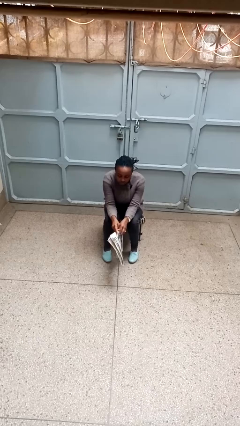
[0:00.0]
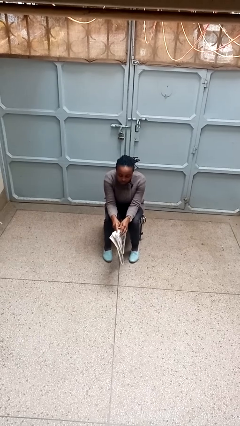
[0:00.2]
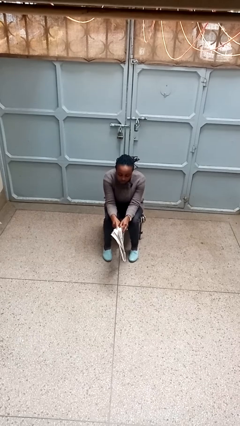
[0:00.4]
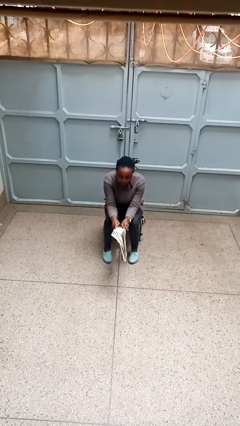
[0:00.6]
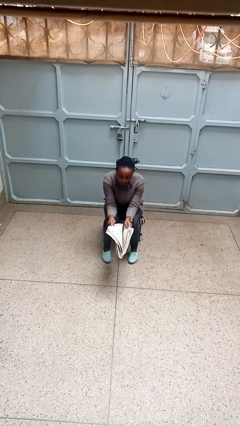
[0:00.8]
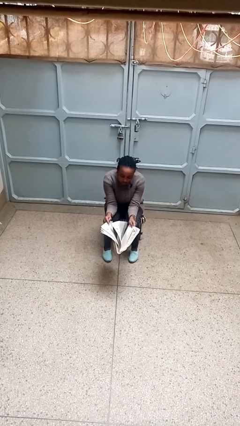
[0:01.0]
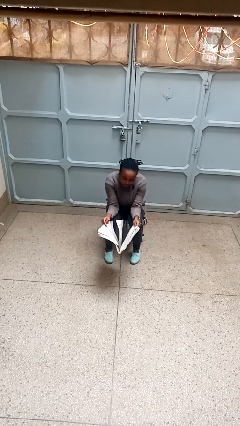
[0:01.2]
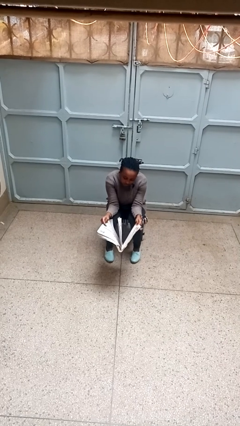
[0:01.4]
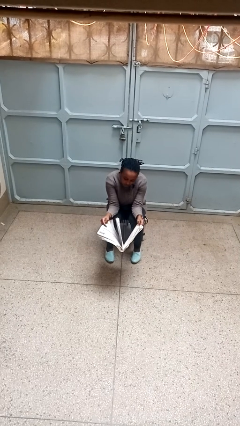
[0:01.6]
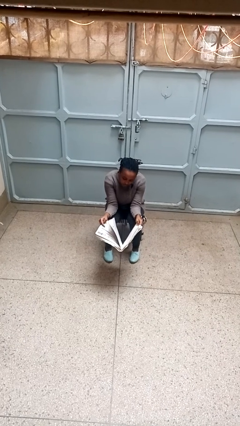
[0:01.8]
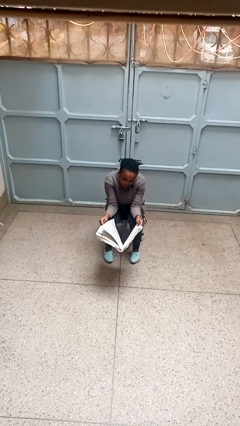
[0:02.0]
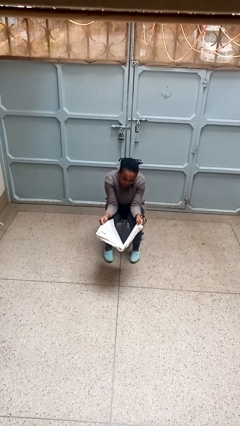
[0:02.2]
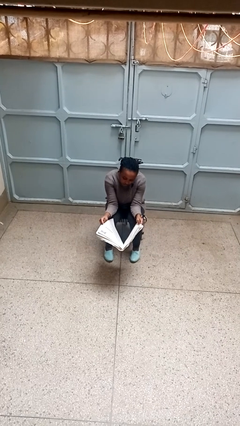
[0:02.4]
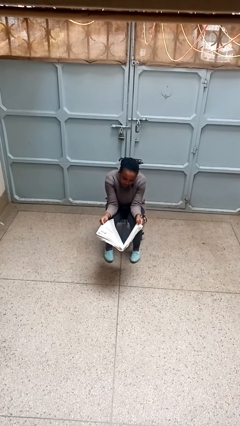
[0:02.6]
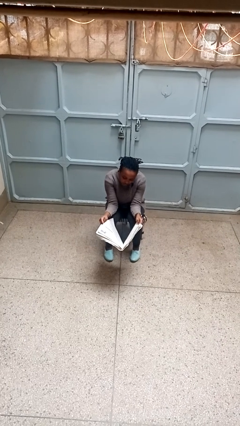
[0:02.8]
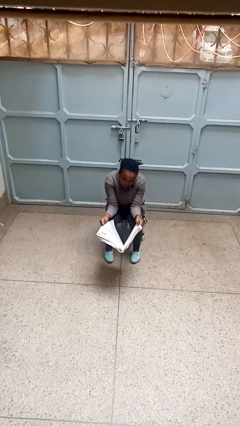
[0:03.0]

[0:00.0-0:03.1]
person reads newspaper

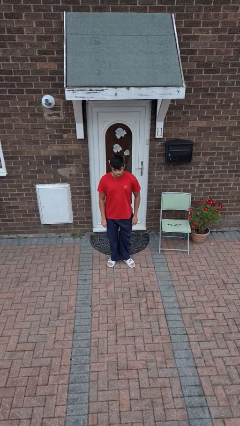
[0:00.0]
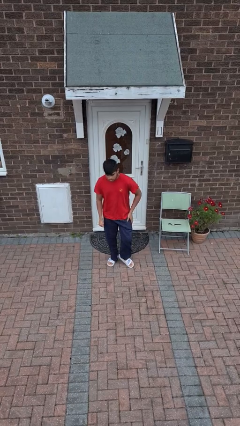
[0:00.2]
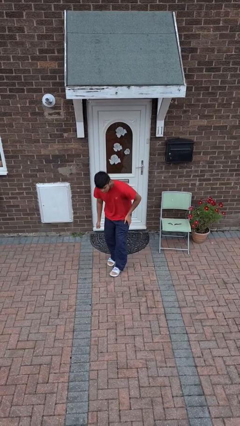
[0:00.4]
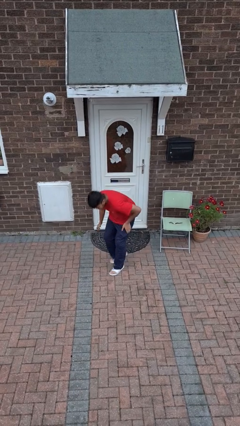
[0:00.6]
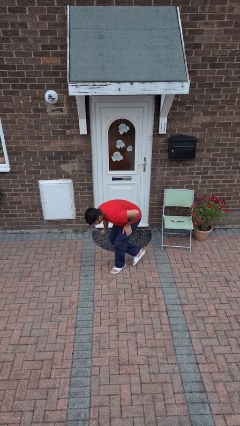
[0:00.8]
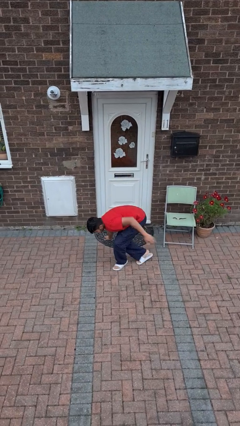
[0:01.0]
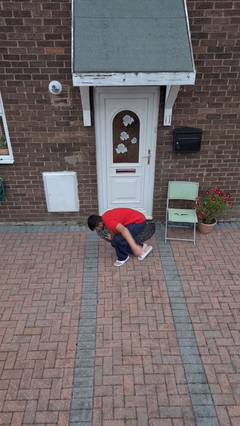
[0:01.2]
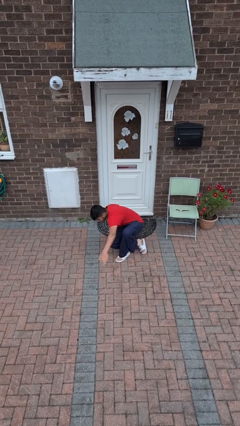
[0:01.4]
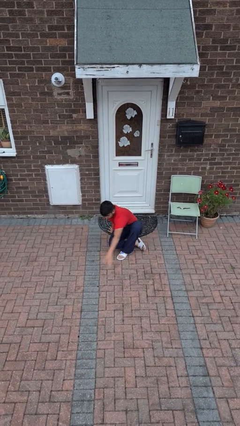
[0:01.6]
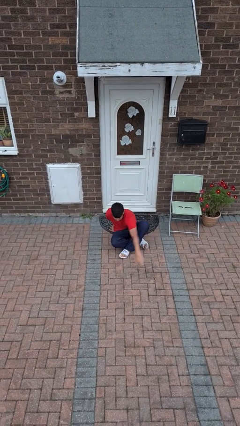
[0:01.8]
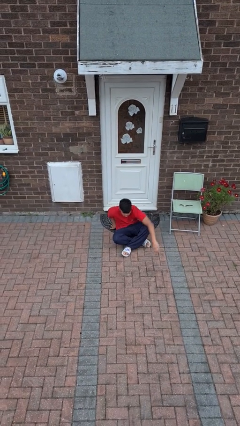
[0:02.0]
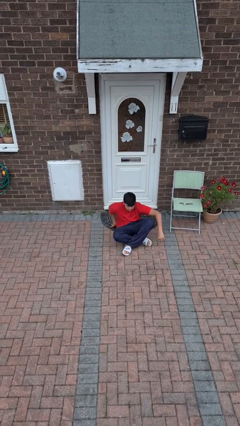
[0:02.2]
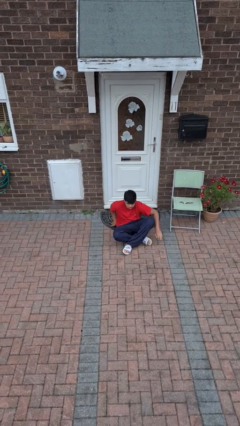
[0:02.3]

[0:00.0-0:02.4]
person sits crisscross

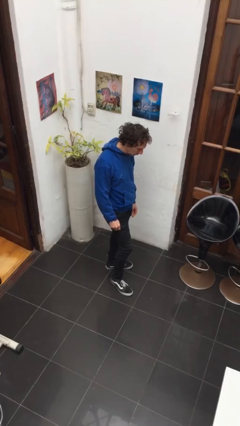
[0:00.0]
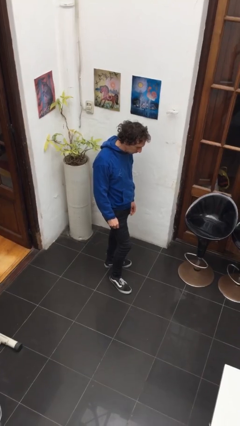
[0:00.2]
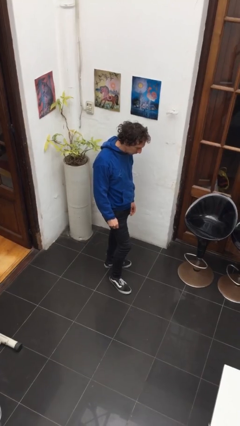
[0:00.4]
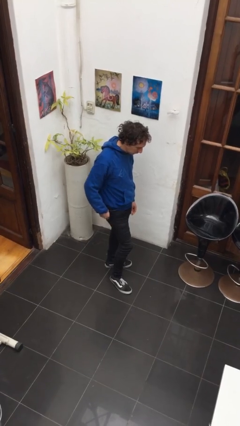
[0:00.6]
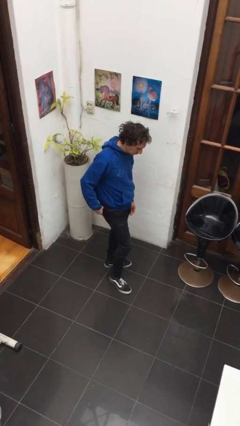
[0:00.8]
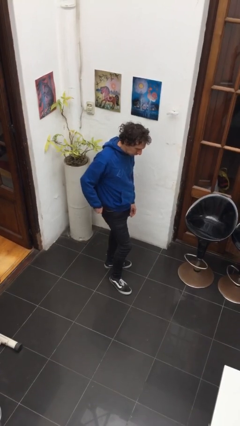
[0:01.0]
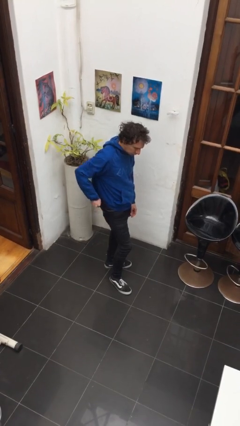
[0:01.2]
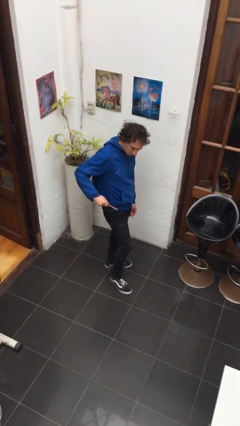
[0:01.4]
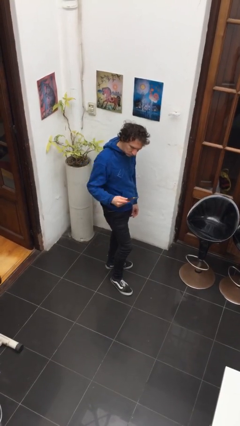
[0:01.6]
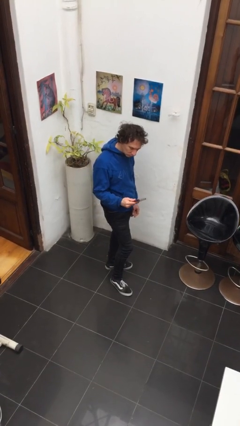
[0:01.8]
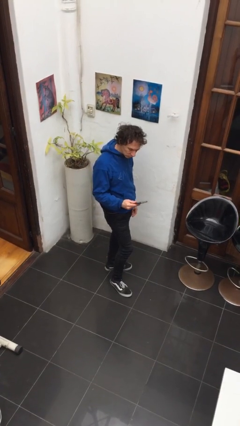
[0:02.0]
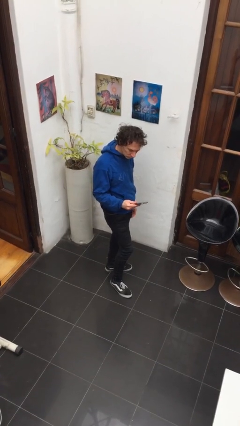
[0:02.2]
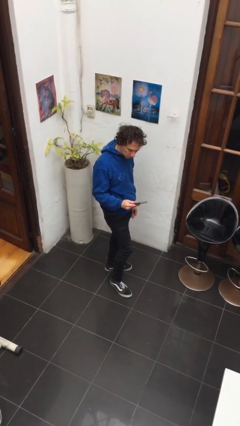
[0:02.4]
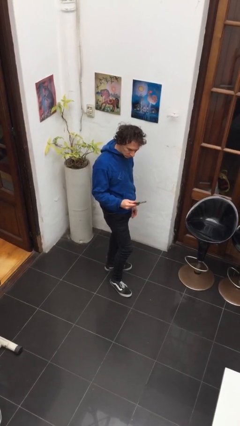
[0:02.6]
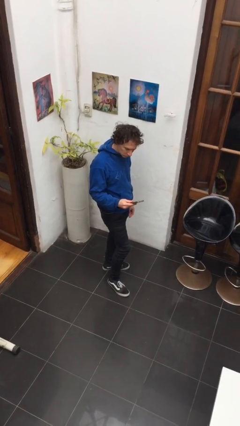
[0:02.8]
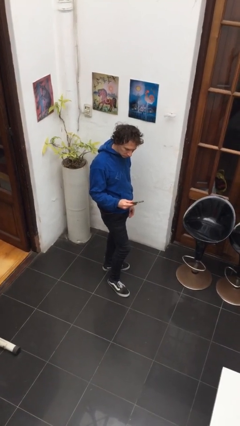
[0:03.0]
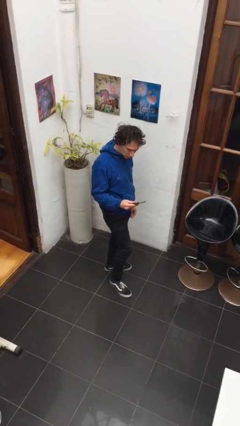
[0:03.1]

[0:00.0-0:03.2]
person takes phone from pocket

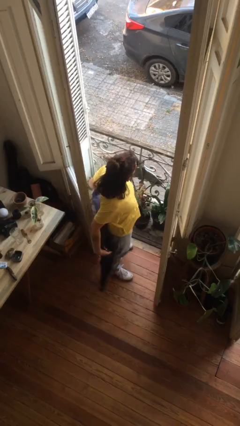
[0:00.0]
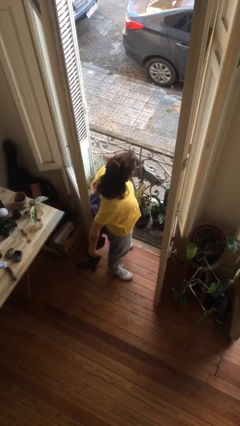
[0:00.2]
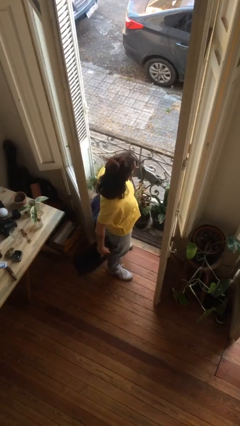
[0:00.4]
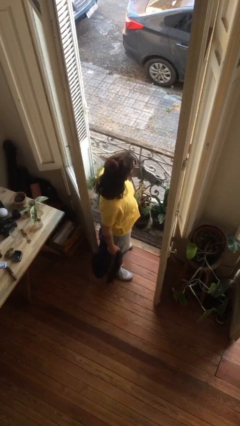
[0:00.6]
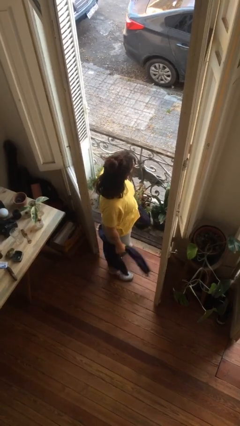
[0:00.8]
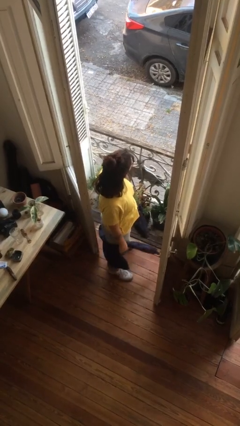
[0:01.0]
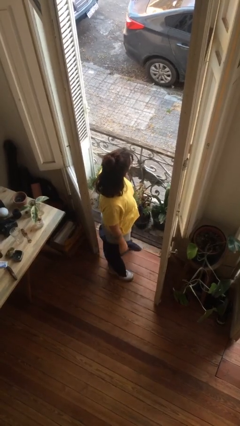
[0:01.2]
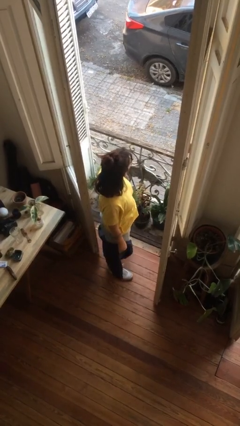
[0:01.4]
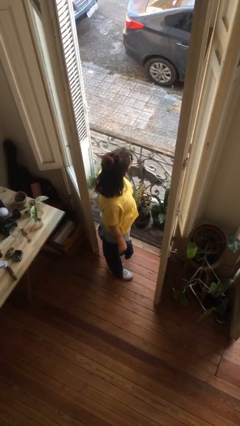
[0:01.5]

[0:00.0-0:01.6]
person unties jacket around waist

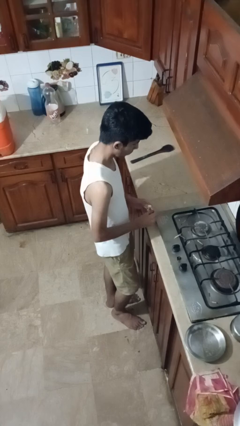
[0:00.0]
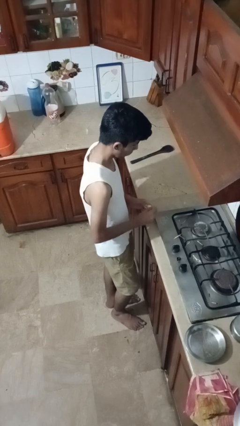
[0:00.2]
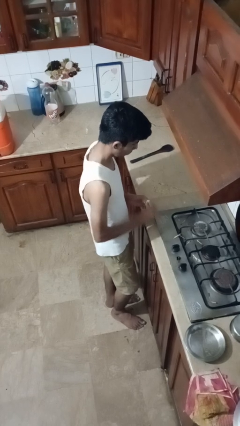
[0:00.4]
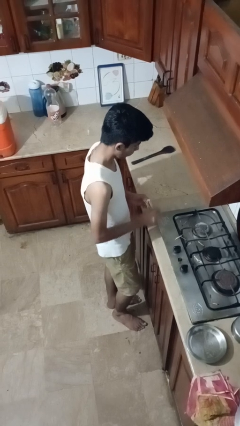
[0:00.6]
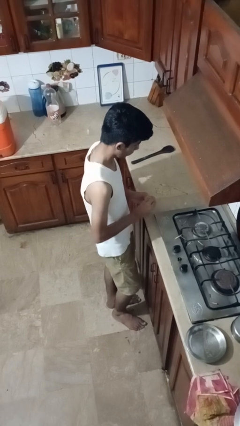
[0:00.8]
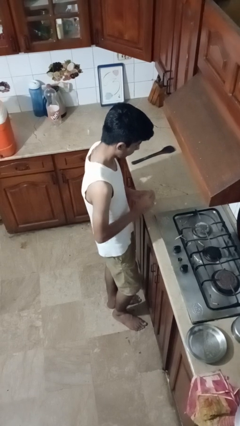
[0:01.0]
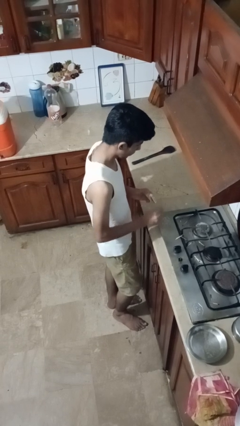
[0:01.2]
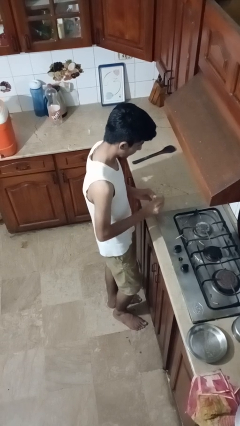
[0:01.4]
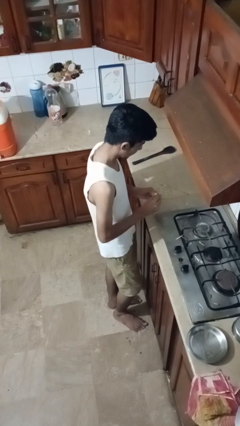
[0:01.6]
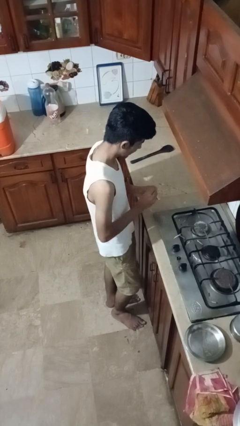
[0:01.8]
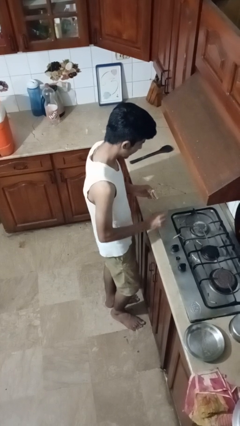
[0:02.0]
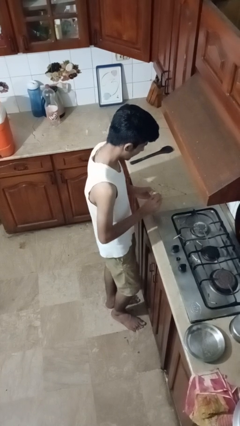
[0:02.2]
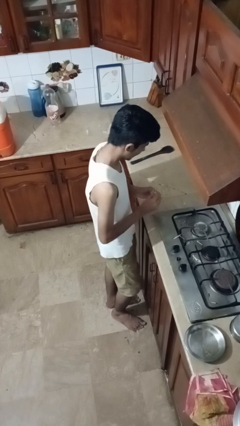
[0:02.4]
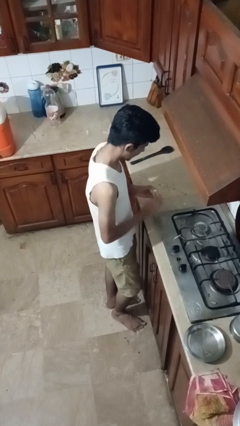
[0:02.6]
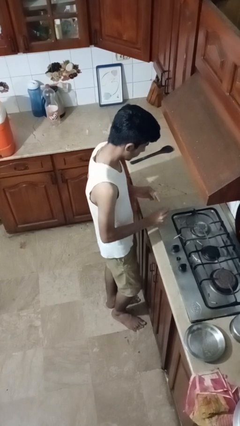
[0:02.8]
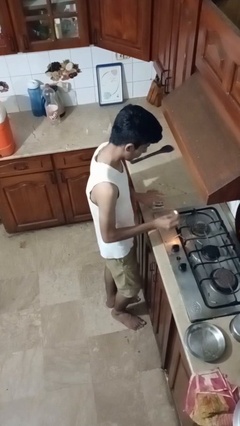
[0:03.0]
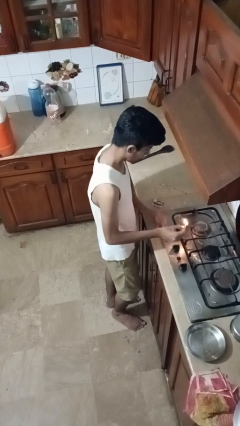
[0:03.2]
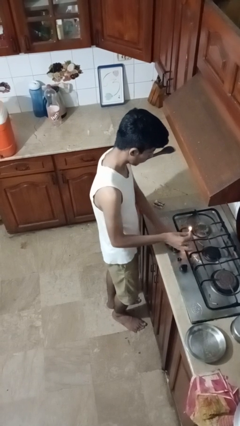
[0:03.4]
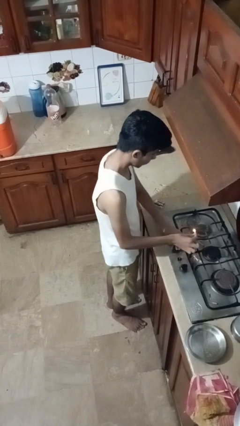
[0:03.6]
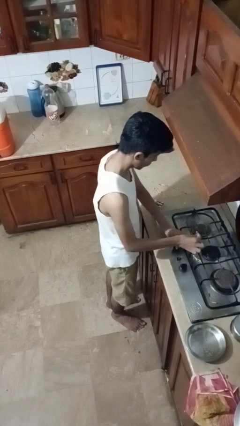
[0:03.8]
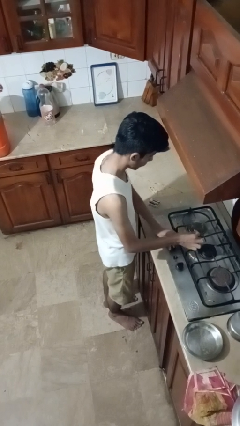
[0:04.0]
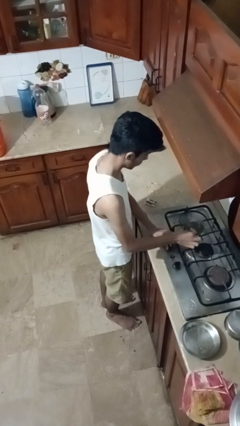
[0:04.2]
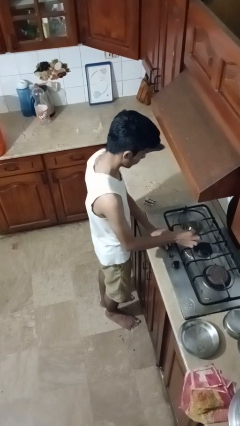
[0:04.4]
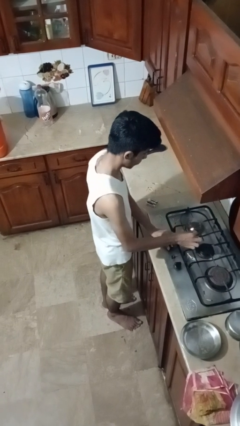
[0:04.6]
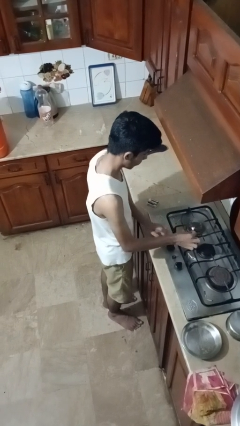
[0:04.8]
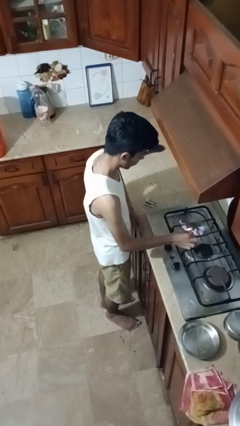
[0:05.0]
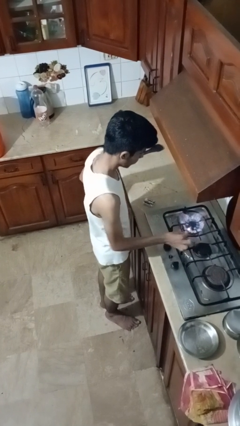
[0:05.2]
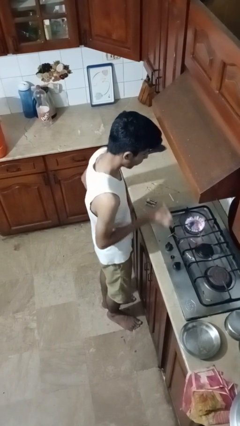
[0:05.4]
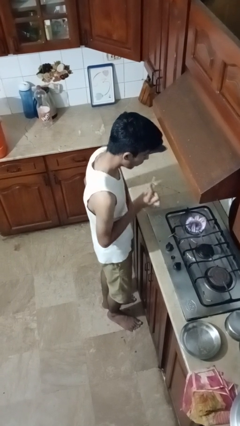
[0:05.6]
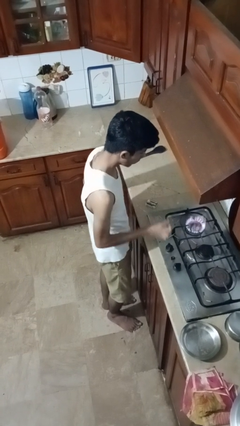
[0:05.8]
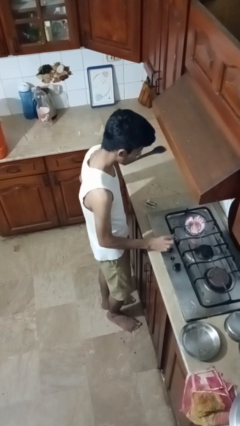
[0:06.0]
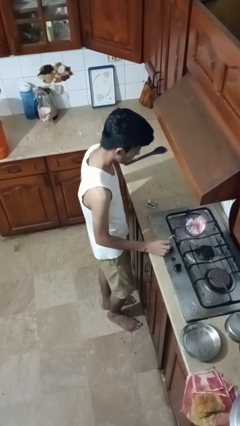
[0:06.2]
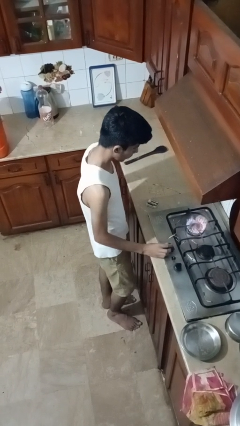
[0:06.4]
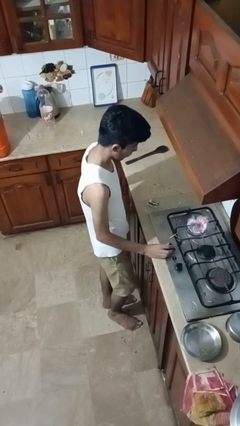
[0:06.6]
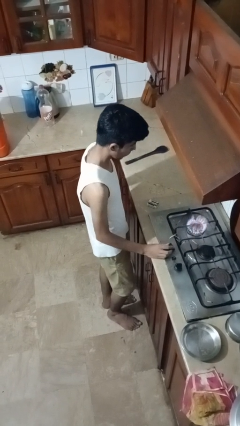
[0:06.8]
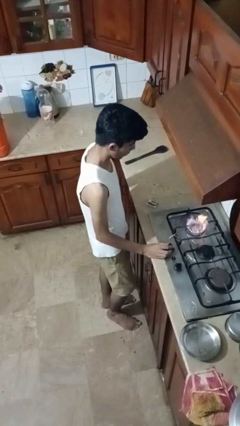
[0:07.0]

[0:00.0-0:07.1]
person turns on stovetop

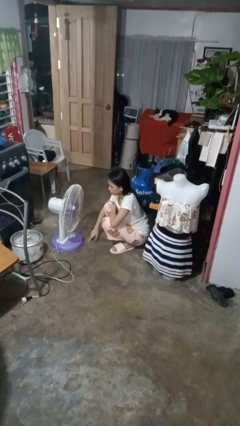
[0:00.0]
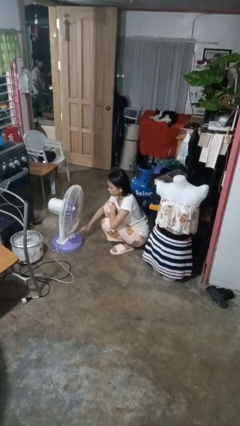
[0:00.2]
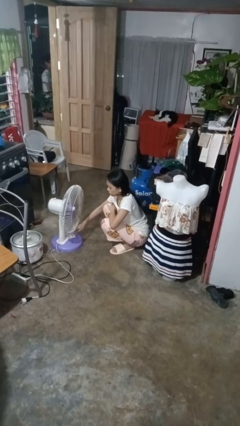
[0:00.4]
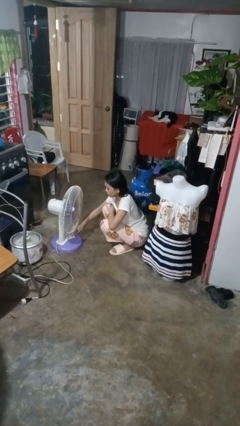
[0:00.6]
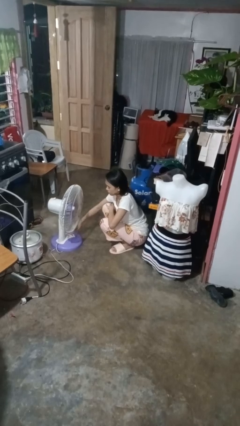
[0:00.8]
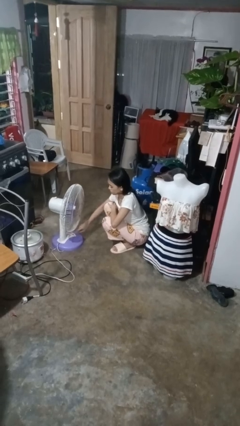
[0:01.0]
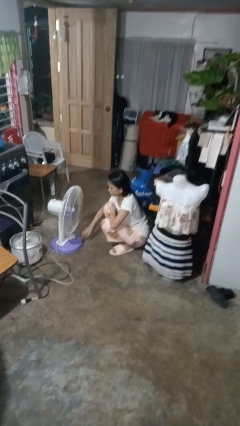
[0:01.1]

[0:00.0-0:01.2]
person turns on fan
